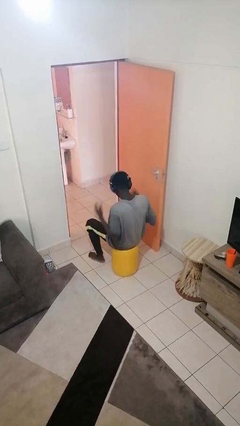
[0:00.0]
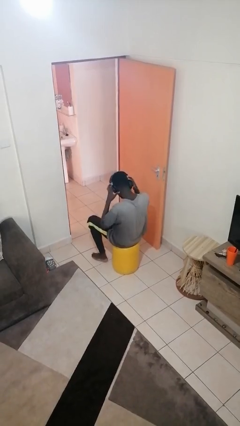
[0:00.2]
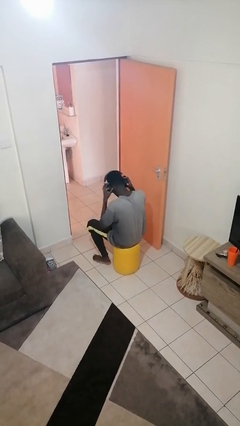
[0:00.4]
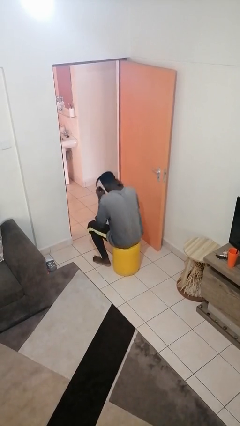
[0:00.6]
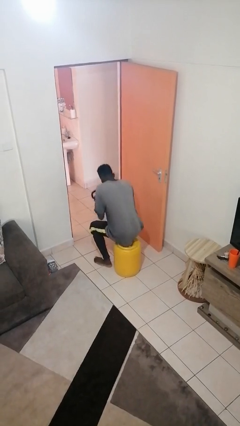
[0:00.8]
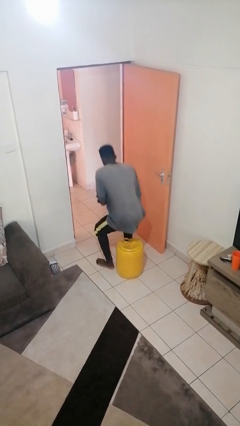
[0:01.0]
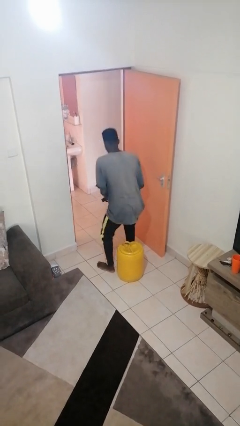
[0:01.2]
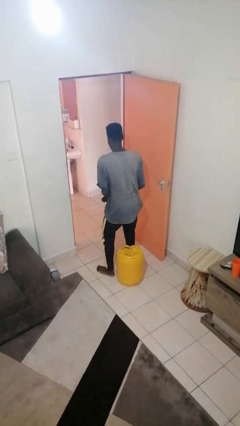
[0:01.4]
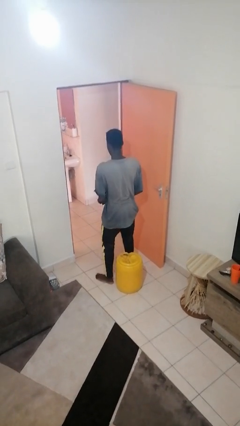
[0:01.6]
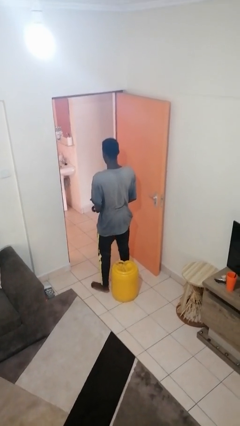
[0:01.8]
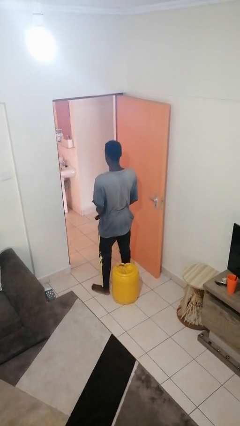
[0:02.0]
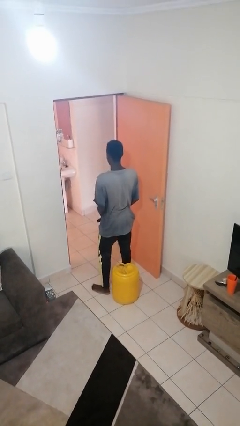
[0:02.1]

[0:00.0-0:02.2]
person takes off headphones

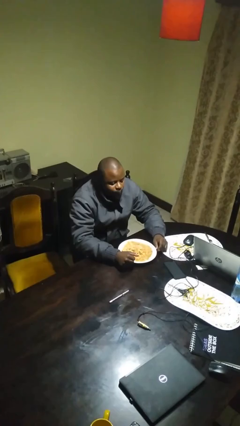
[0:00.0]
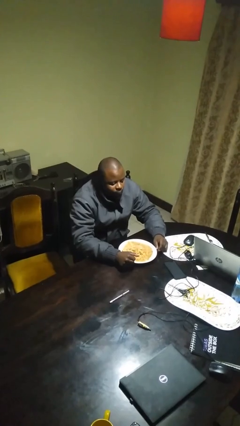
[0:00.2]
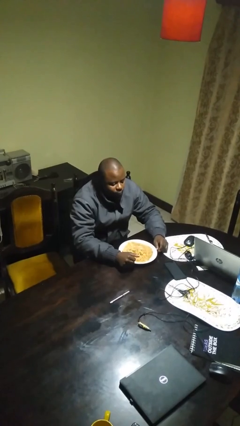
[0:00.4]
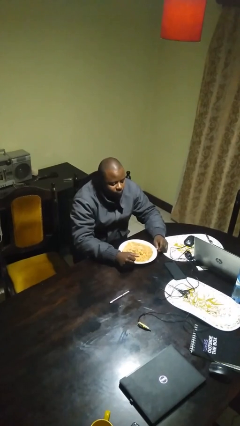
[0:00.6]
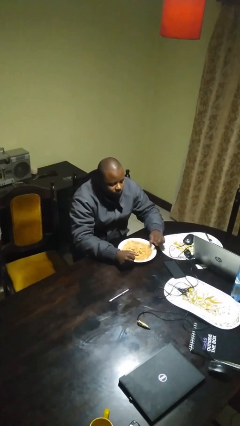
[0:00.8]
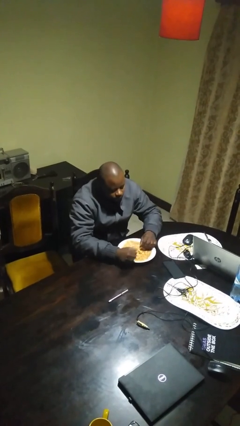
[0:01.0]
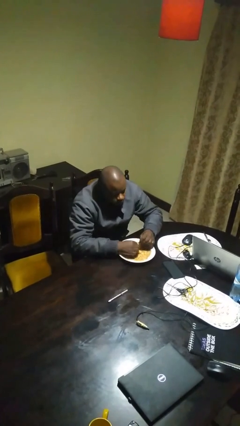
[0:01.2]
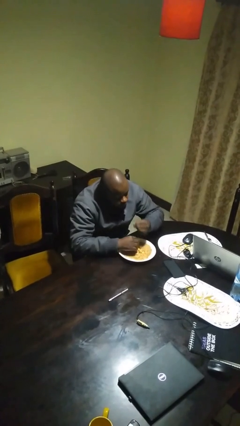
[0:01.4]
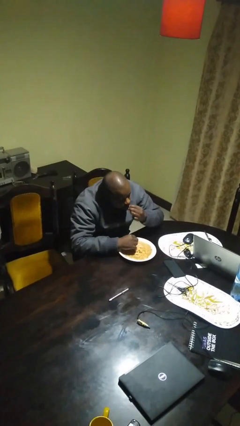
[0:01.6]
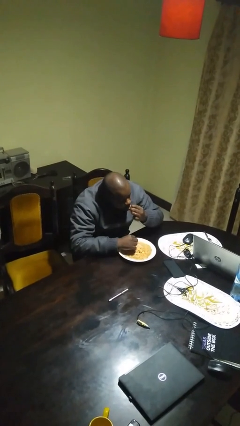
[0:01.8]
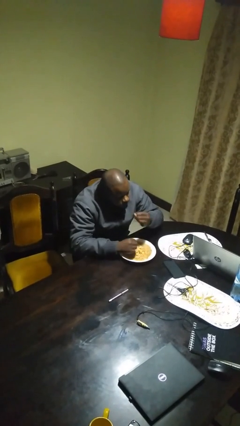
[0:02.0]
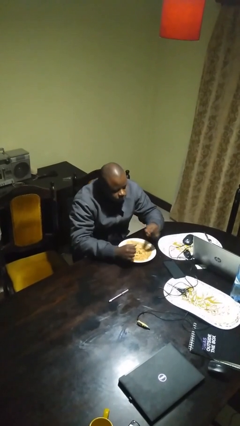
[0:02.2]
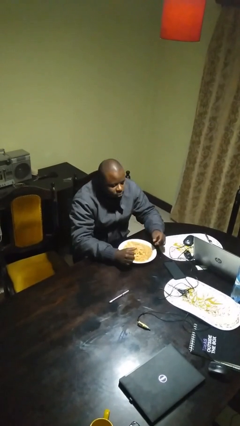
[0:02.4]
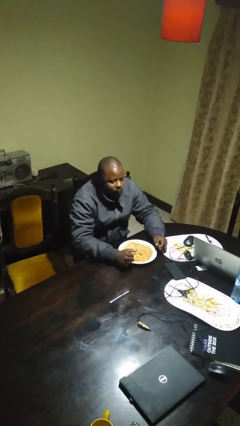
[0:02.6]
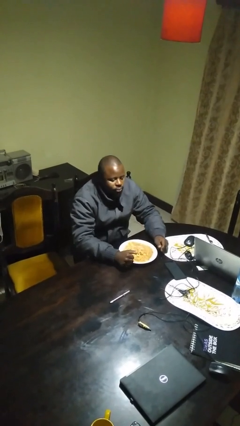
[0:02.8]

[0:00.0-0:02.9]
person eats with hands

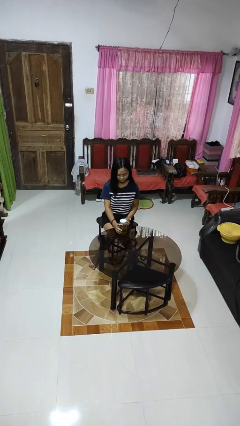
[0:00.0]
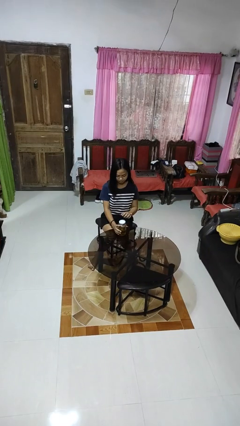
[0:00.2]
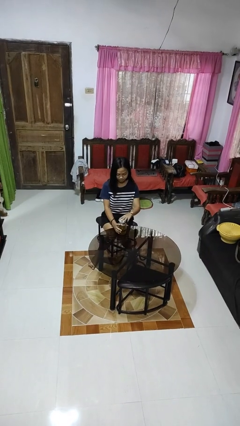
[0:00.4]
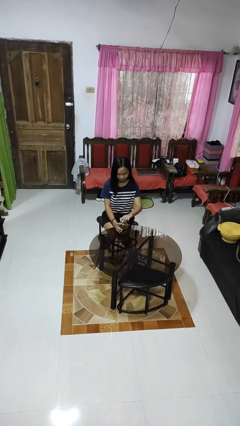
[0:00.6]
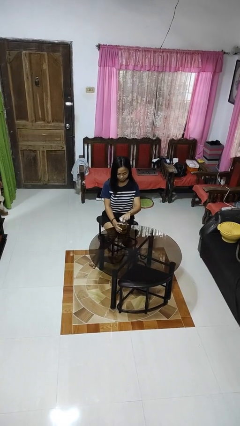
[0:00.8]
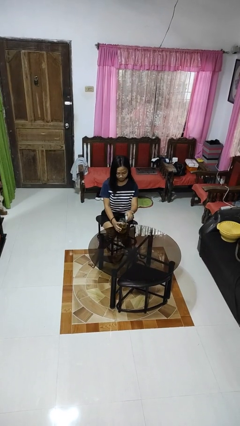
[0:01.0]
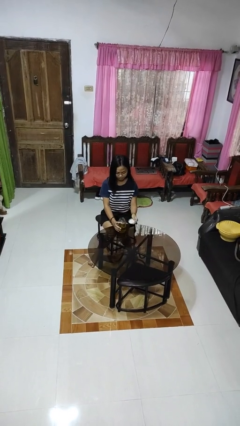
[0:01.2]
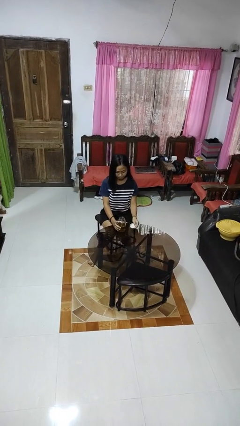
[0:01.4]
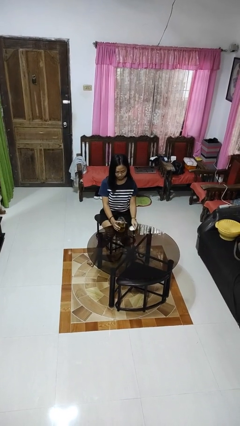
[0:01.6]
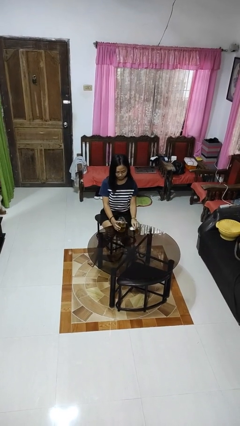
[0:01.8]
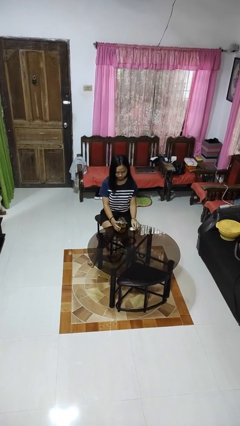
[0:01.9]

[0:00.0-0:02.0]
person opens jar

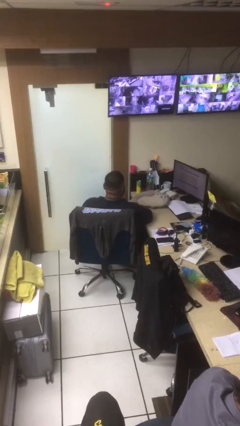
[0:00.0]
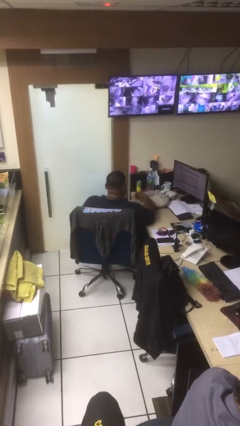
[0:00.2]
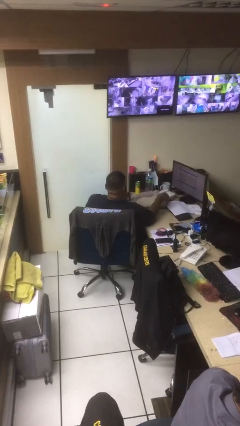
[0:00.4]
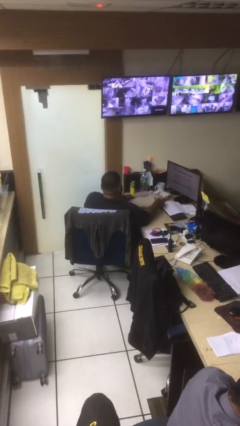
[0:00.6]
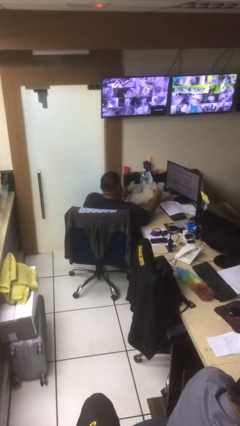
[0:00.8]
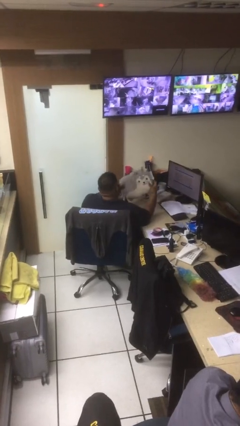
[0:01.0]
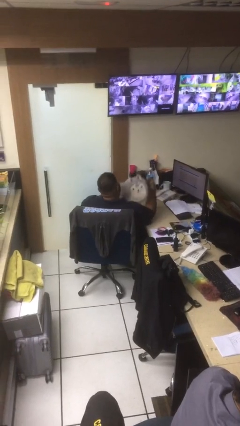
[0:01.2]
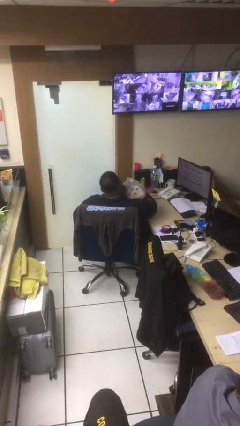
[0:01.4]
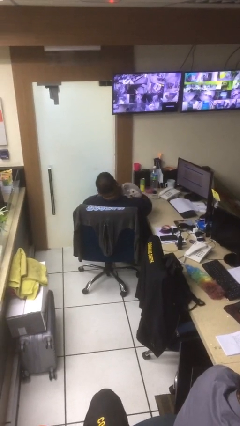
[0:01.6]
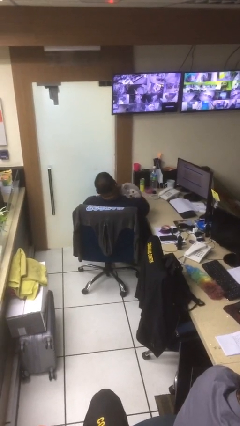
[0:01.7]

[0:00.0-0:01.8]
person hugs stuffed animal

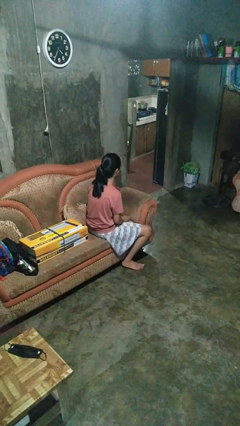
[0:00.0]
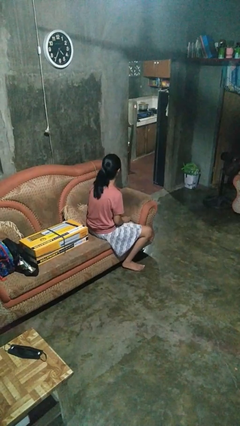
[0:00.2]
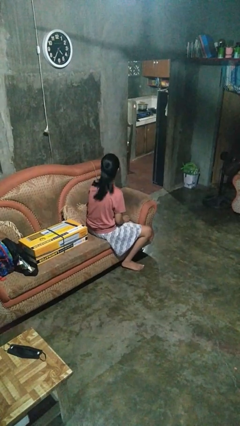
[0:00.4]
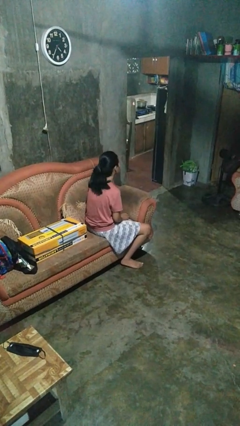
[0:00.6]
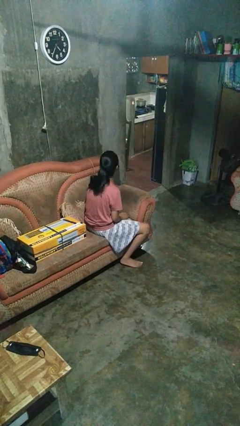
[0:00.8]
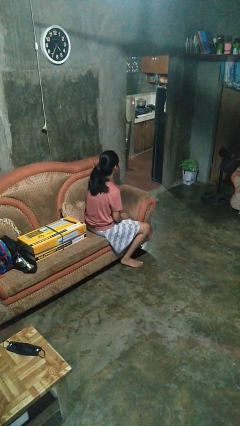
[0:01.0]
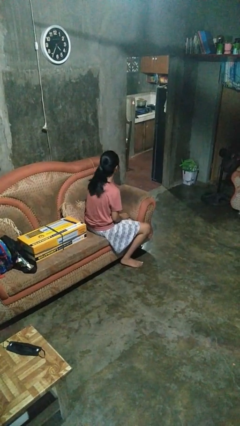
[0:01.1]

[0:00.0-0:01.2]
person shakes head

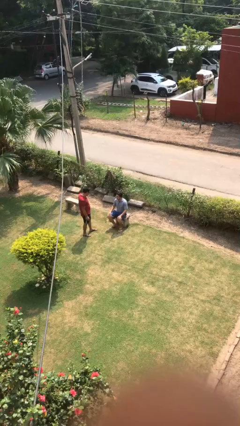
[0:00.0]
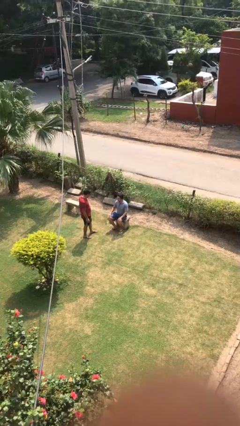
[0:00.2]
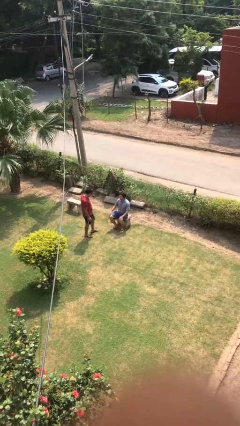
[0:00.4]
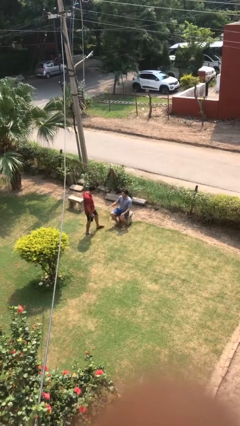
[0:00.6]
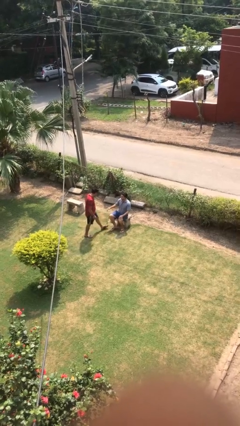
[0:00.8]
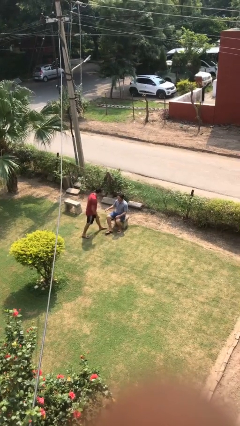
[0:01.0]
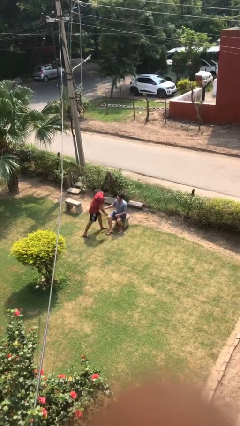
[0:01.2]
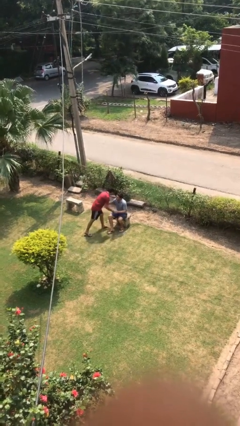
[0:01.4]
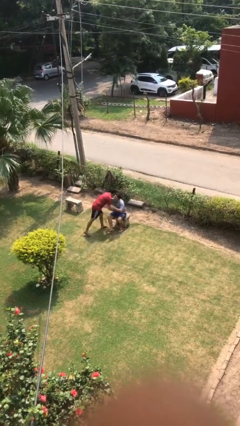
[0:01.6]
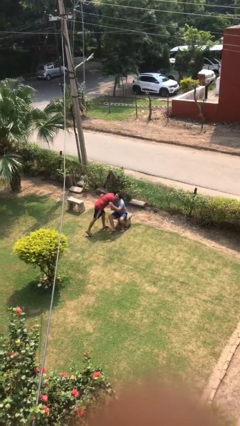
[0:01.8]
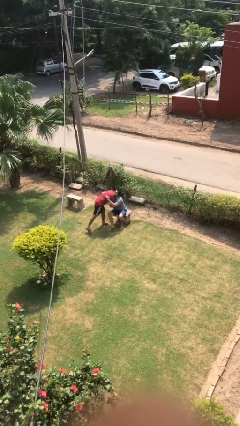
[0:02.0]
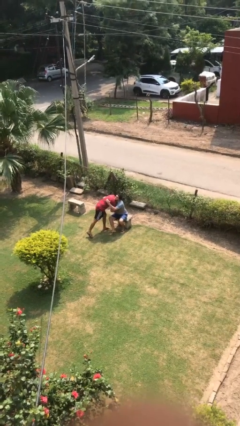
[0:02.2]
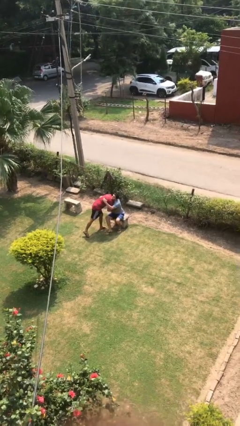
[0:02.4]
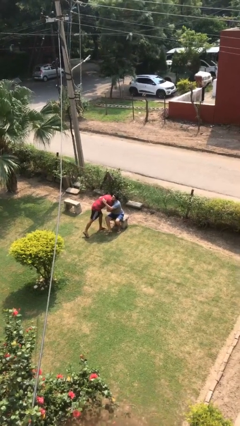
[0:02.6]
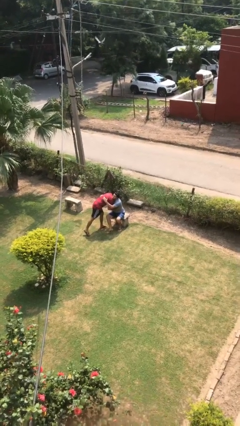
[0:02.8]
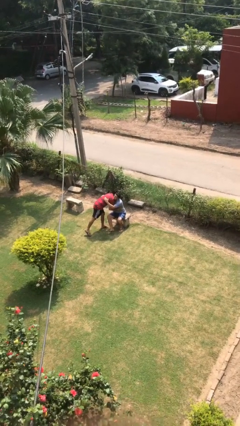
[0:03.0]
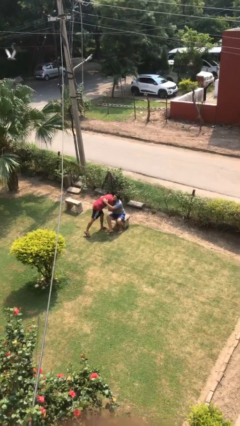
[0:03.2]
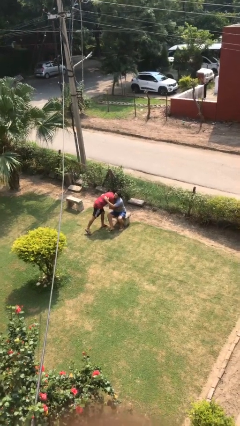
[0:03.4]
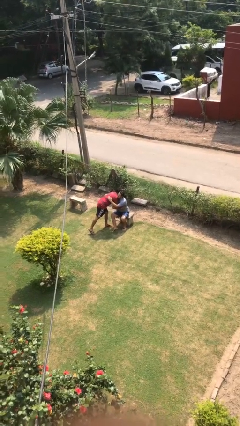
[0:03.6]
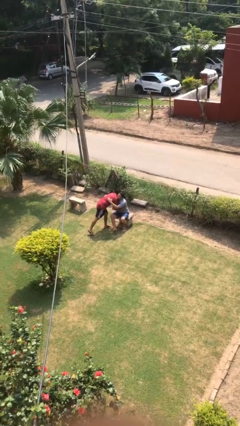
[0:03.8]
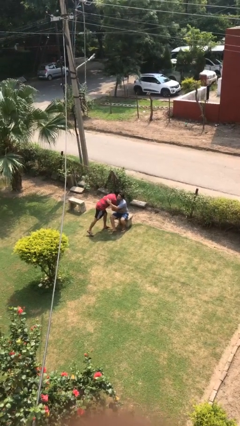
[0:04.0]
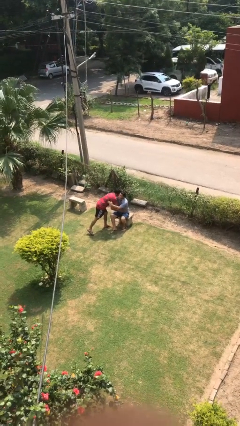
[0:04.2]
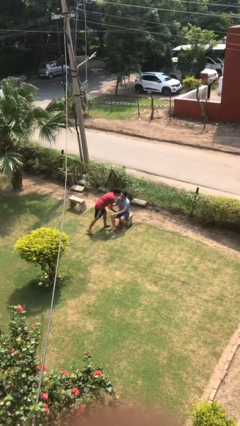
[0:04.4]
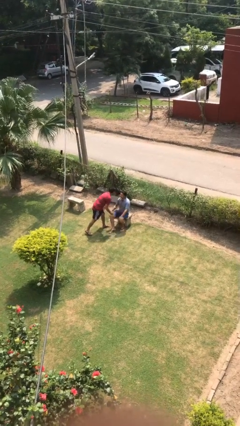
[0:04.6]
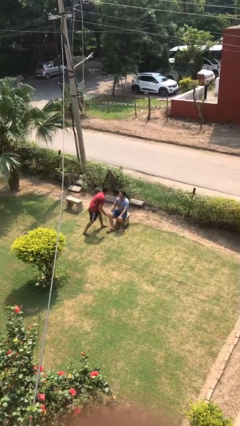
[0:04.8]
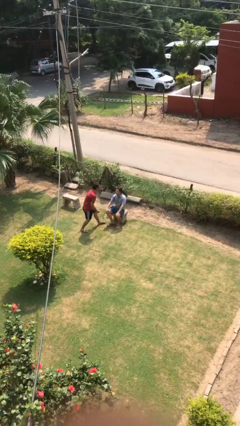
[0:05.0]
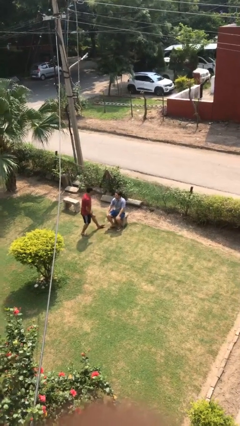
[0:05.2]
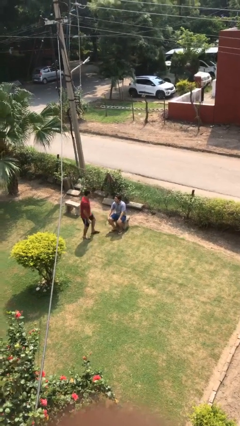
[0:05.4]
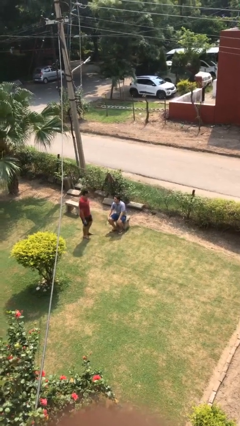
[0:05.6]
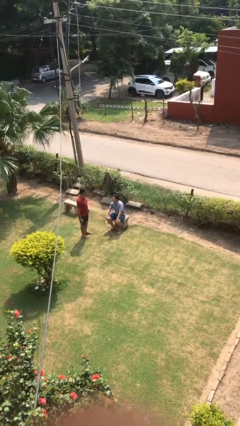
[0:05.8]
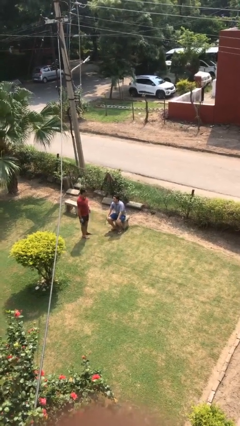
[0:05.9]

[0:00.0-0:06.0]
person embraces person

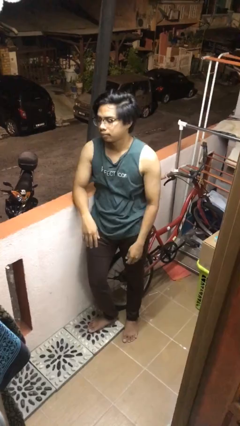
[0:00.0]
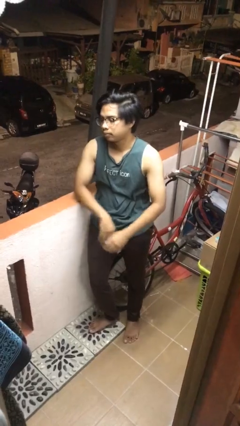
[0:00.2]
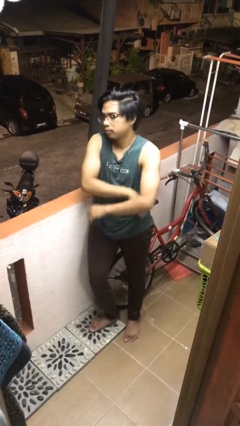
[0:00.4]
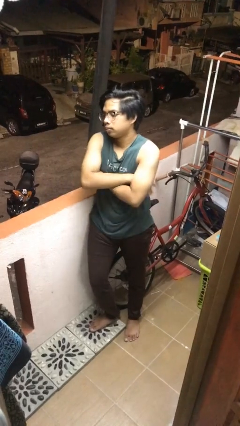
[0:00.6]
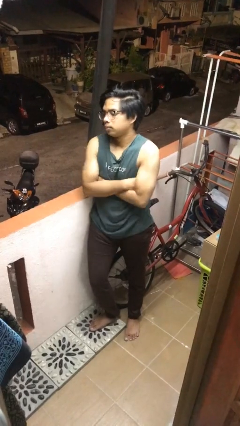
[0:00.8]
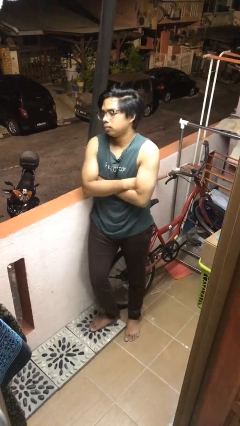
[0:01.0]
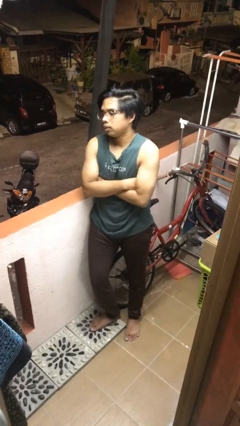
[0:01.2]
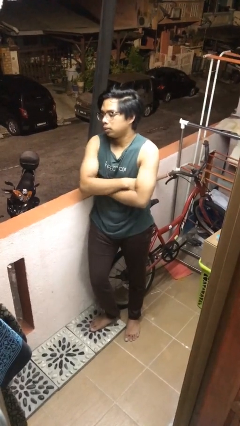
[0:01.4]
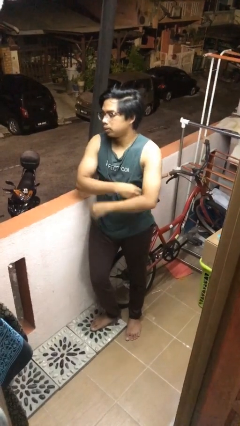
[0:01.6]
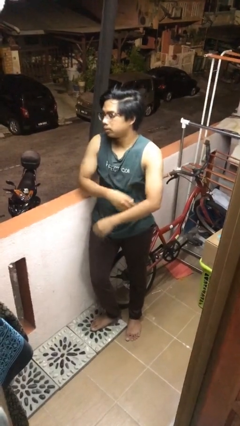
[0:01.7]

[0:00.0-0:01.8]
person crosses arms
